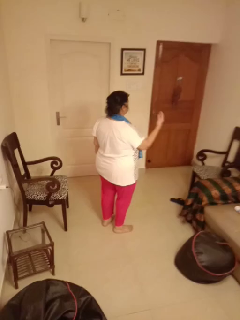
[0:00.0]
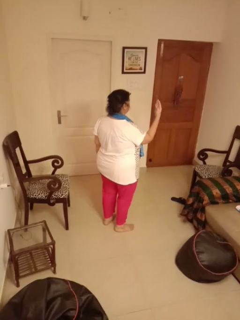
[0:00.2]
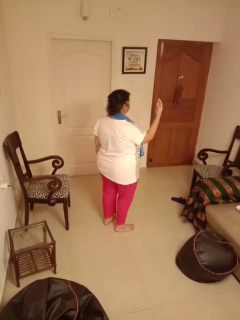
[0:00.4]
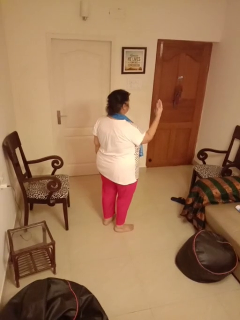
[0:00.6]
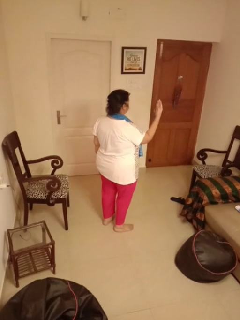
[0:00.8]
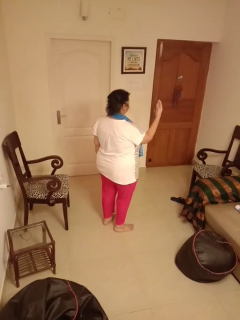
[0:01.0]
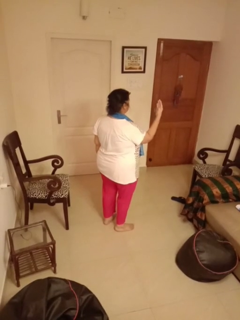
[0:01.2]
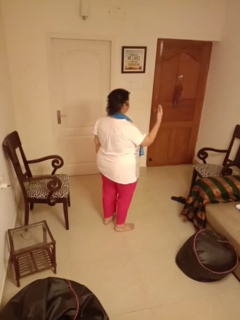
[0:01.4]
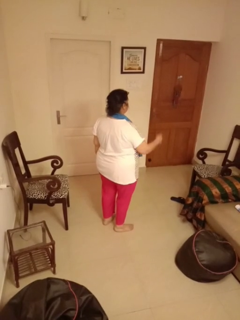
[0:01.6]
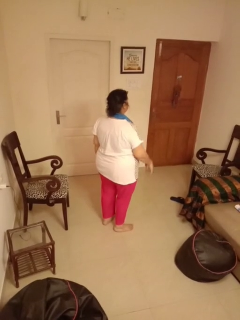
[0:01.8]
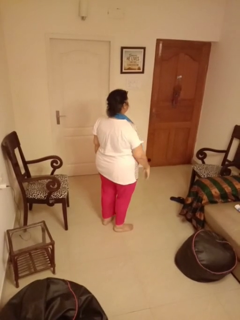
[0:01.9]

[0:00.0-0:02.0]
person gestures number four

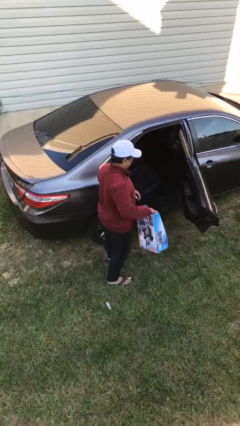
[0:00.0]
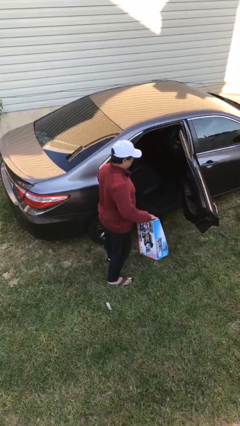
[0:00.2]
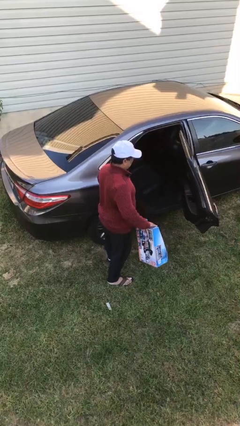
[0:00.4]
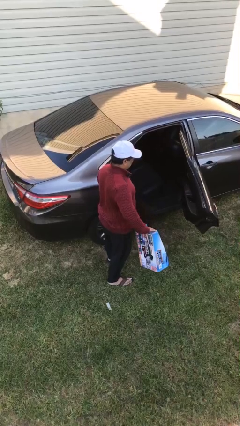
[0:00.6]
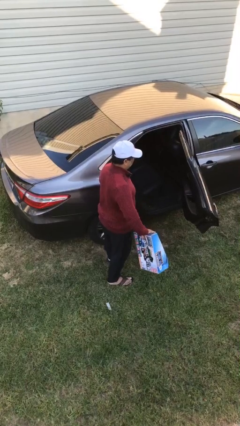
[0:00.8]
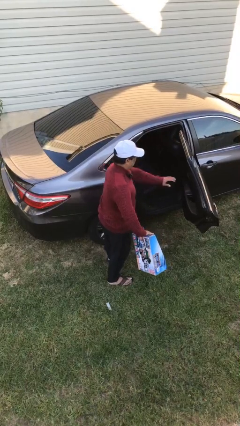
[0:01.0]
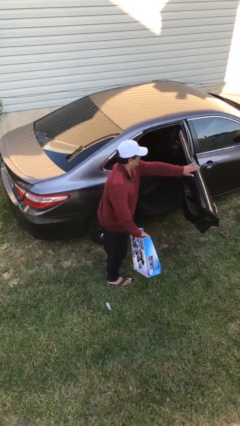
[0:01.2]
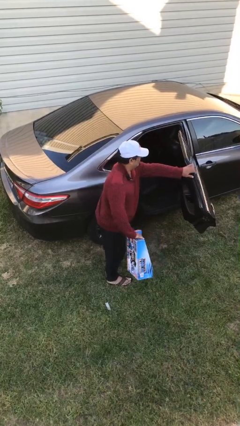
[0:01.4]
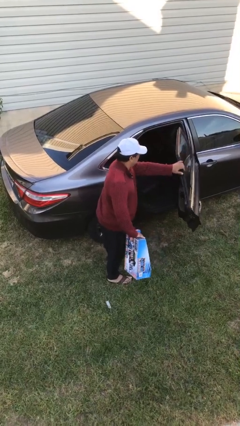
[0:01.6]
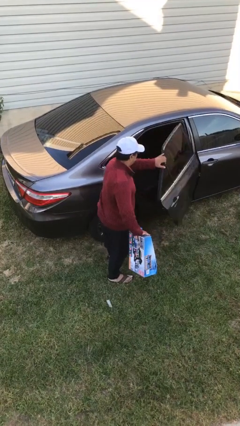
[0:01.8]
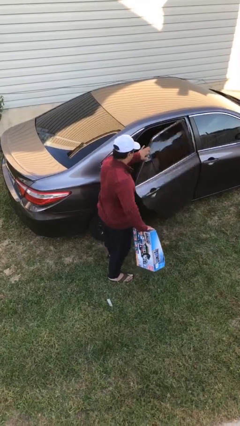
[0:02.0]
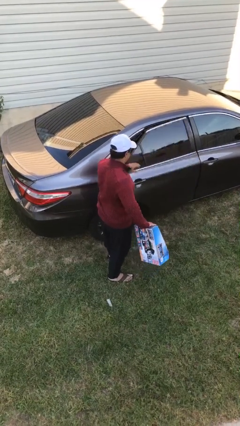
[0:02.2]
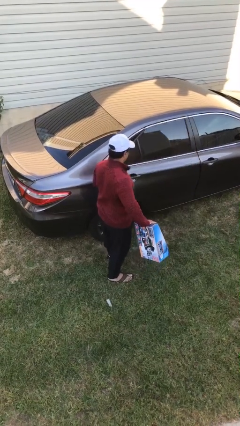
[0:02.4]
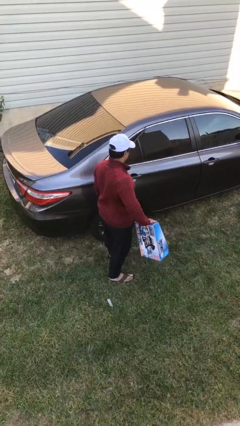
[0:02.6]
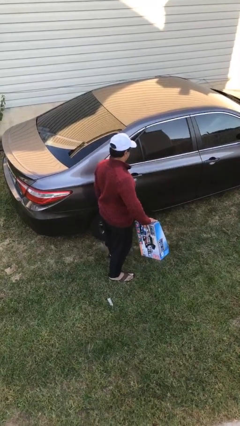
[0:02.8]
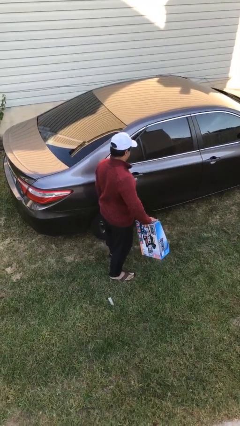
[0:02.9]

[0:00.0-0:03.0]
person closes car door

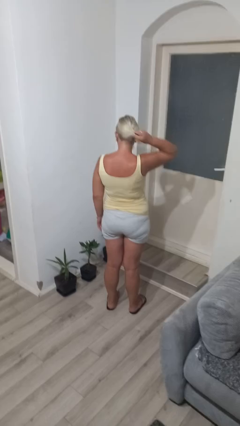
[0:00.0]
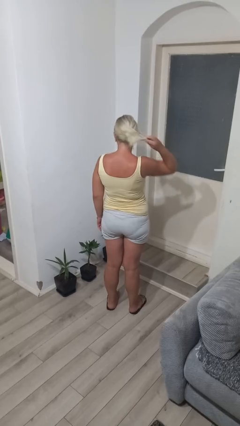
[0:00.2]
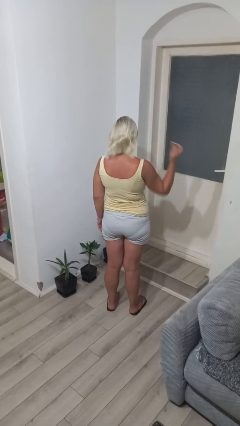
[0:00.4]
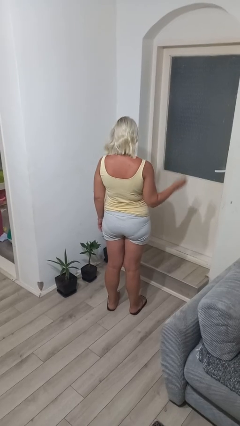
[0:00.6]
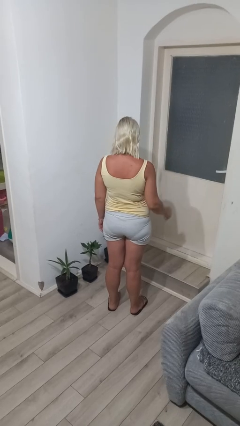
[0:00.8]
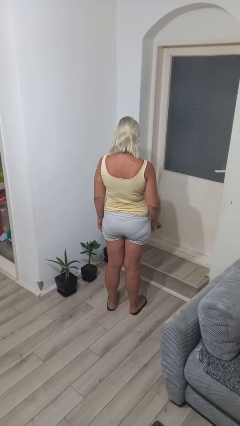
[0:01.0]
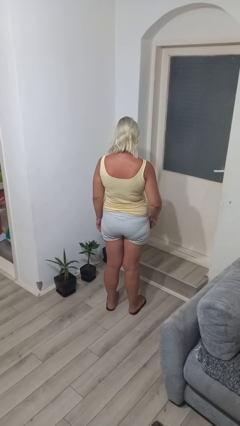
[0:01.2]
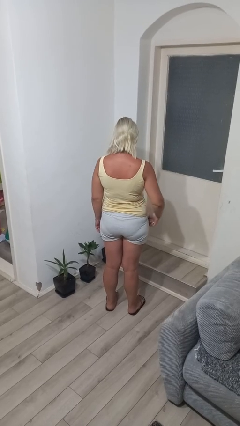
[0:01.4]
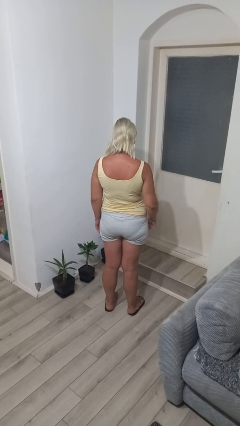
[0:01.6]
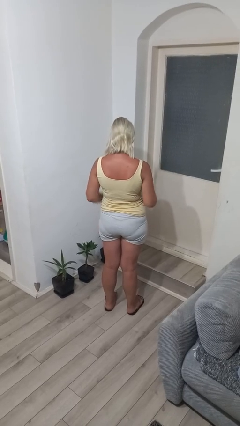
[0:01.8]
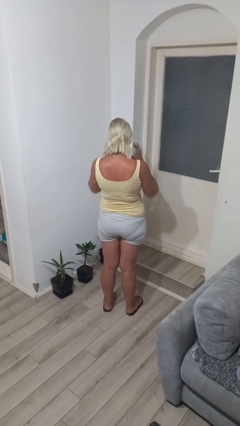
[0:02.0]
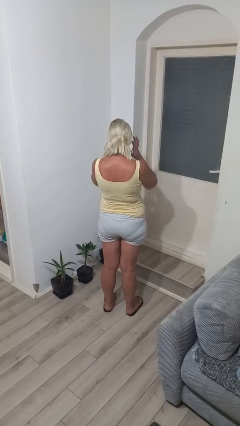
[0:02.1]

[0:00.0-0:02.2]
person takes off hairtie

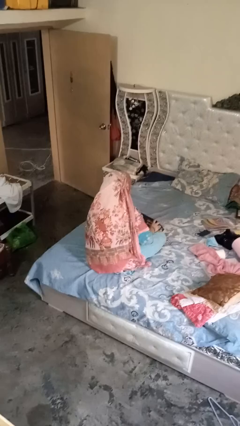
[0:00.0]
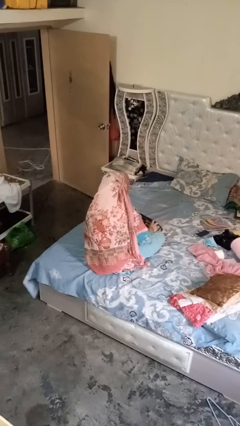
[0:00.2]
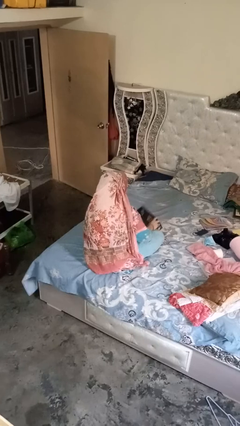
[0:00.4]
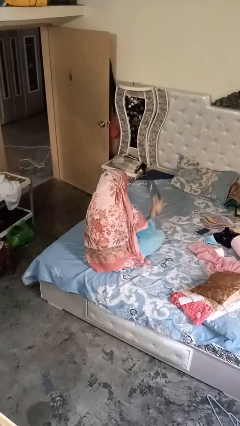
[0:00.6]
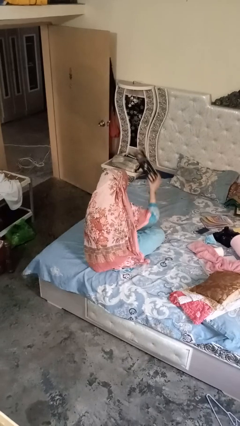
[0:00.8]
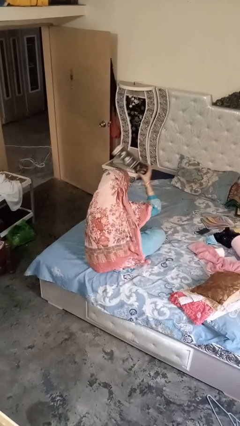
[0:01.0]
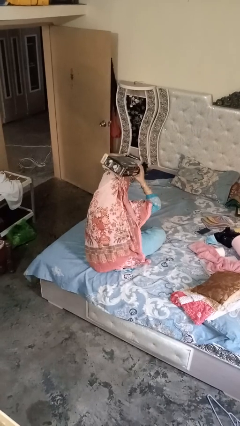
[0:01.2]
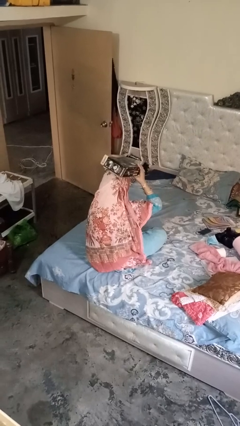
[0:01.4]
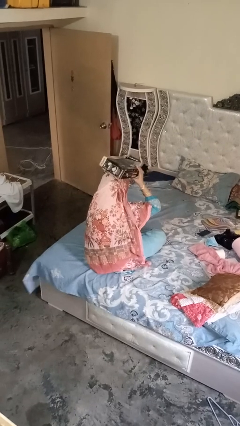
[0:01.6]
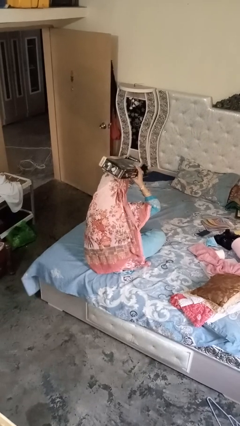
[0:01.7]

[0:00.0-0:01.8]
person holds object above head

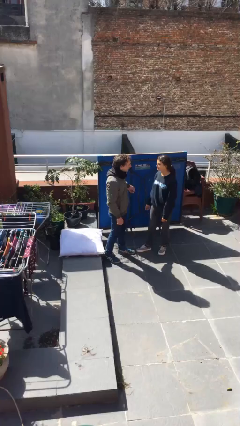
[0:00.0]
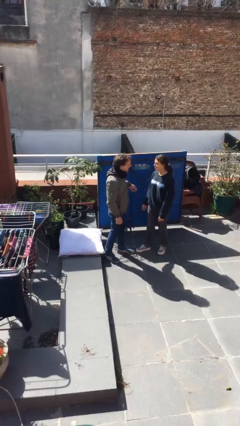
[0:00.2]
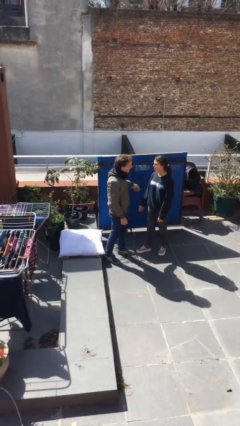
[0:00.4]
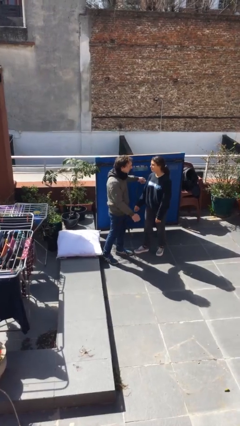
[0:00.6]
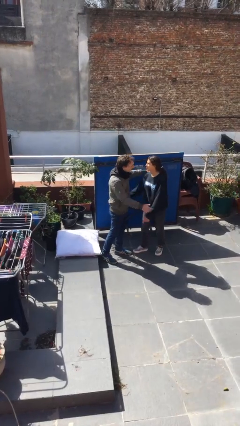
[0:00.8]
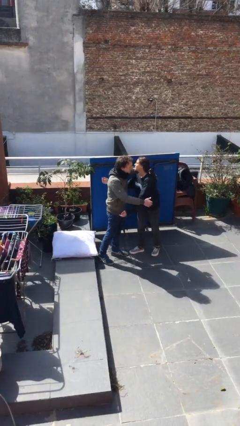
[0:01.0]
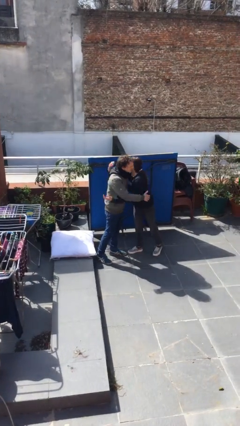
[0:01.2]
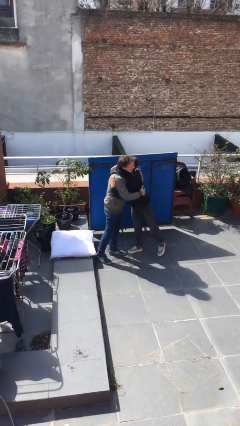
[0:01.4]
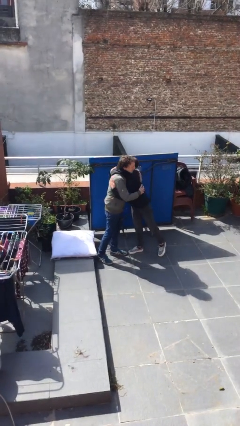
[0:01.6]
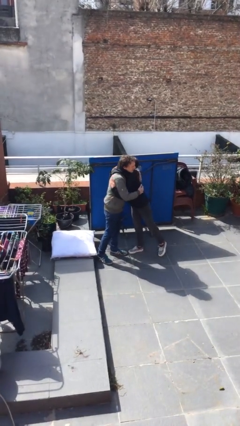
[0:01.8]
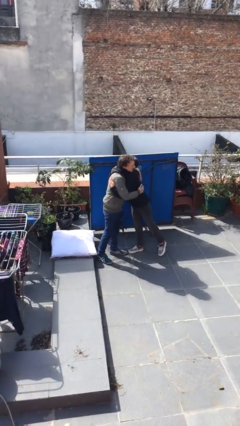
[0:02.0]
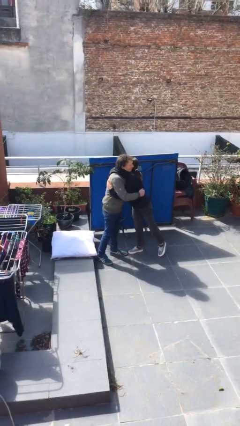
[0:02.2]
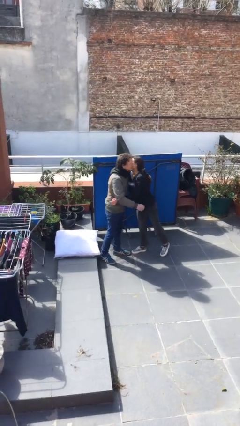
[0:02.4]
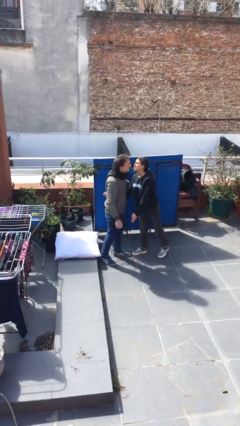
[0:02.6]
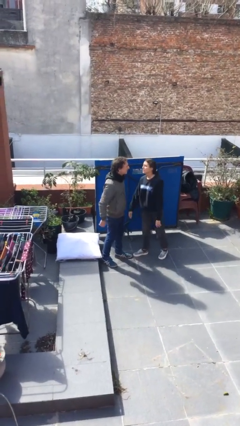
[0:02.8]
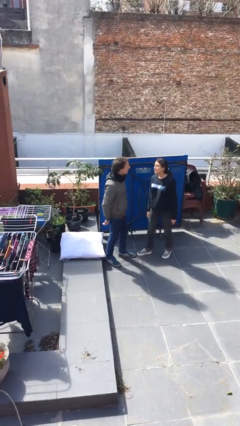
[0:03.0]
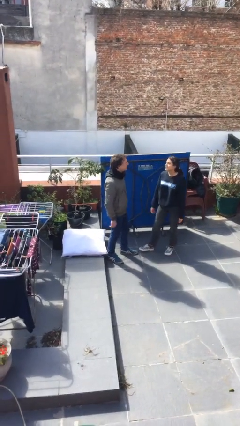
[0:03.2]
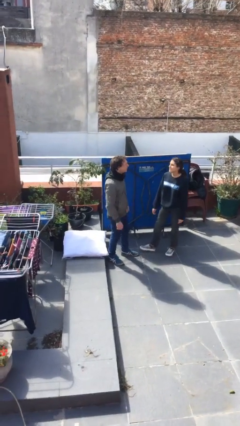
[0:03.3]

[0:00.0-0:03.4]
person embraces person

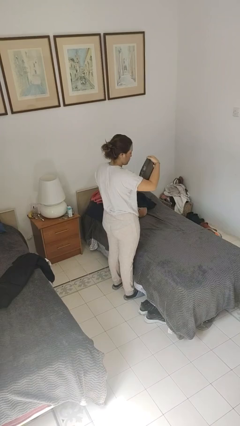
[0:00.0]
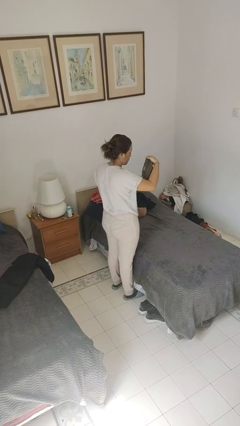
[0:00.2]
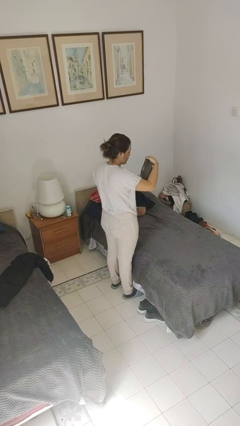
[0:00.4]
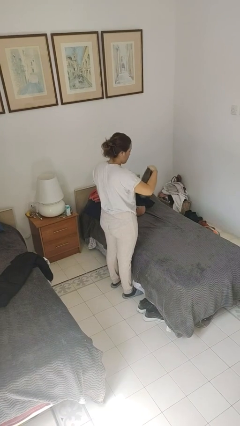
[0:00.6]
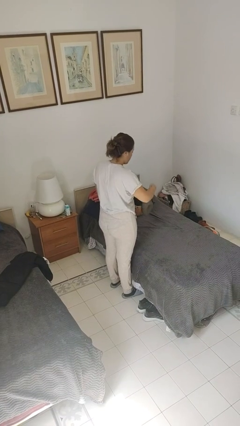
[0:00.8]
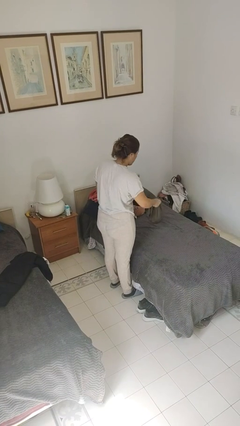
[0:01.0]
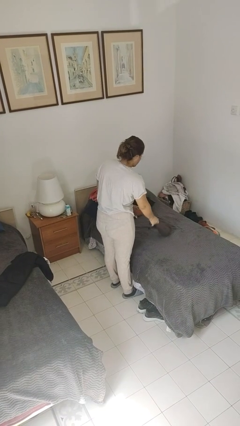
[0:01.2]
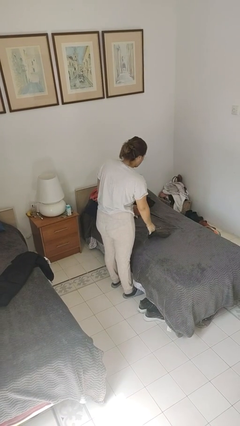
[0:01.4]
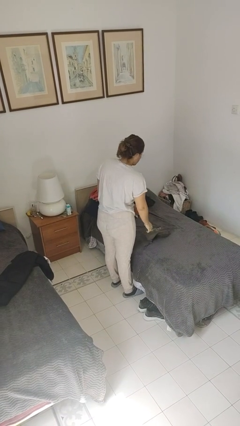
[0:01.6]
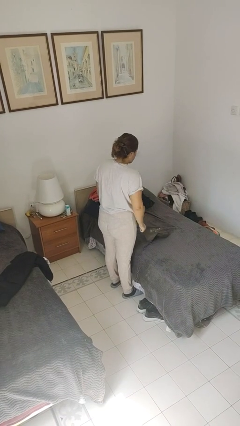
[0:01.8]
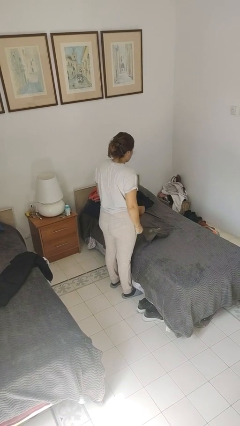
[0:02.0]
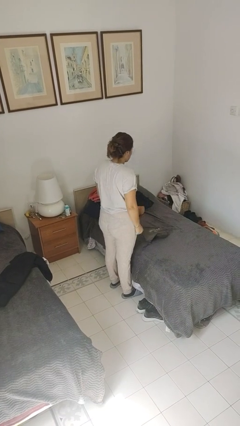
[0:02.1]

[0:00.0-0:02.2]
person puts down object on bed

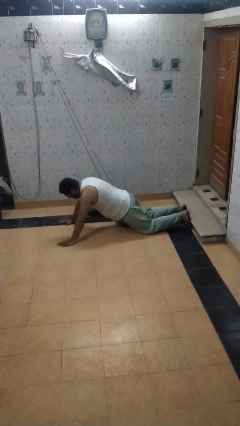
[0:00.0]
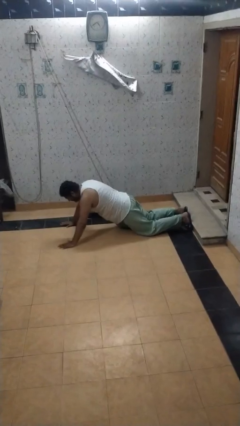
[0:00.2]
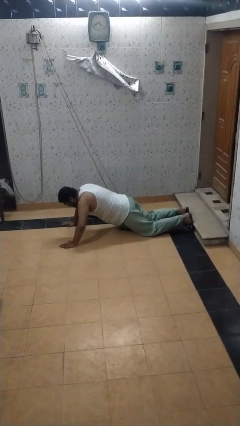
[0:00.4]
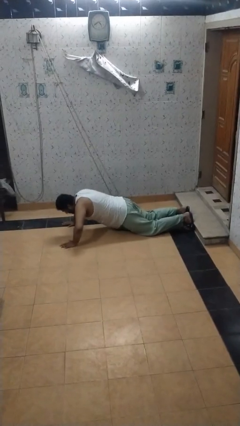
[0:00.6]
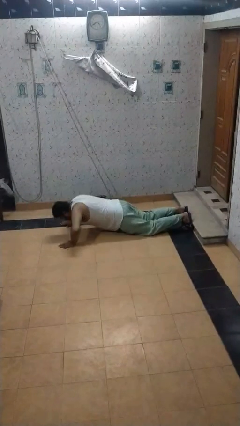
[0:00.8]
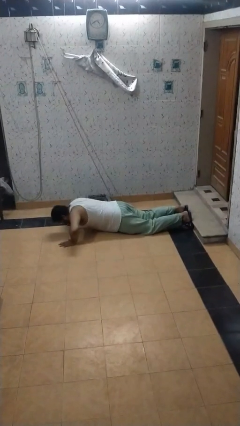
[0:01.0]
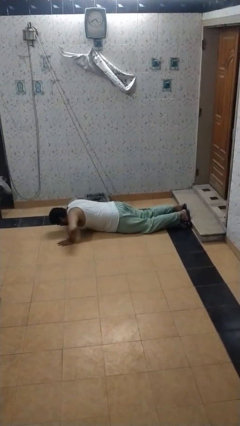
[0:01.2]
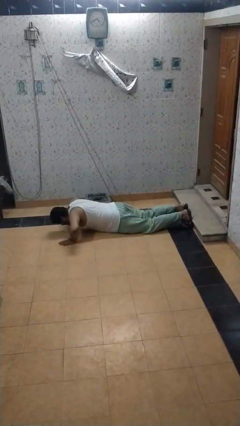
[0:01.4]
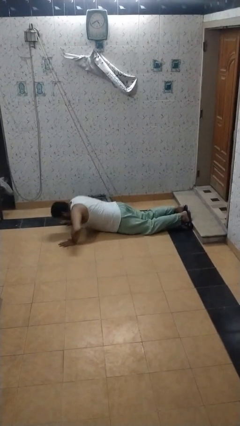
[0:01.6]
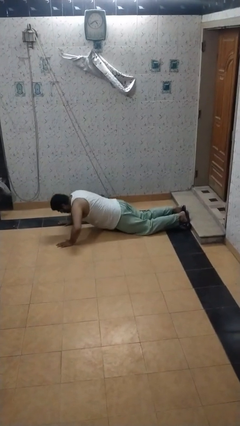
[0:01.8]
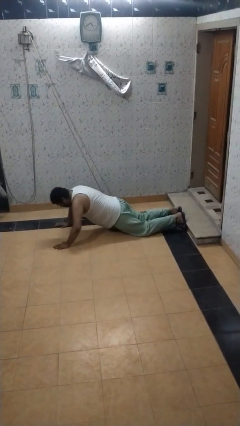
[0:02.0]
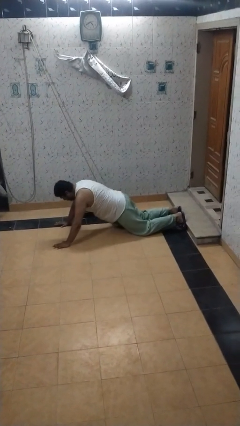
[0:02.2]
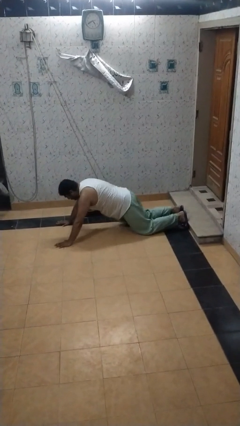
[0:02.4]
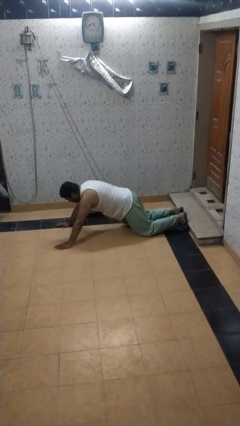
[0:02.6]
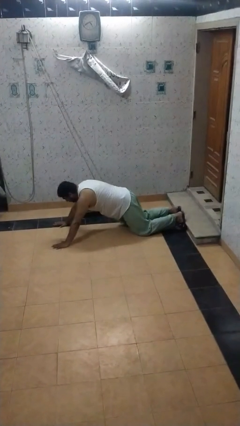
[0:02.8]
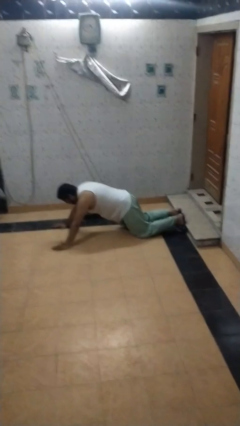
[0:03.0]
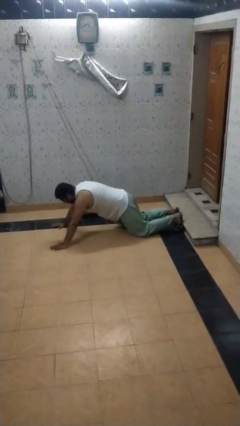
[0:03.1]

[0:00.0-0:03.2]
person exercises with pushup
